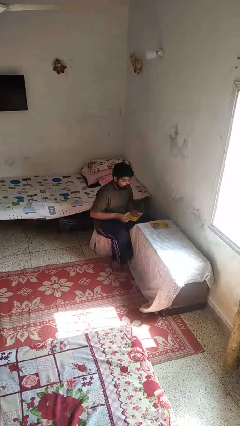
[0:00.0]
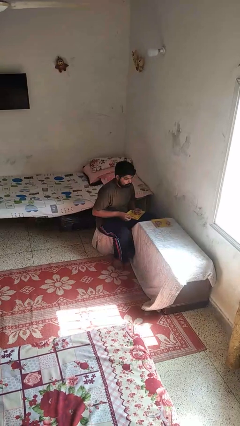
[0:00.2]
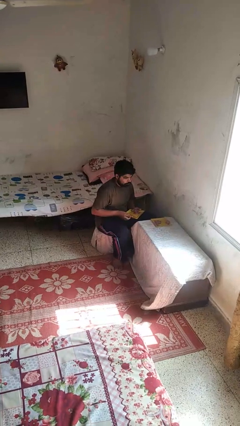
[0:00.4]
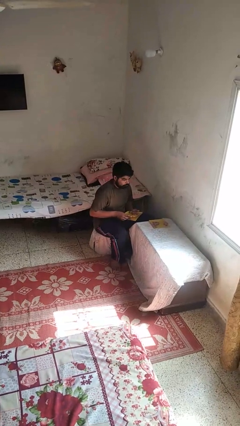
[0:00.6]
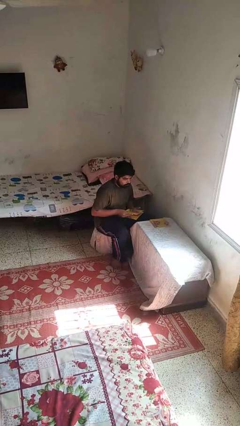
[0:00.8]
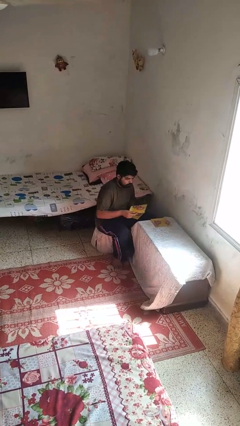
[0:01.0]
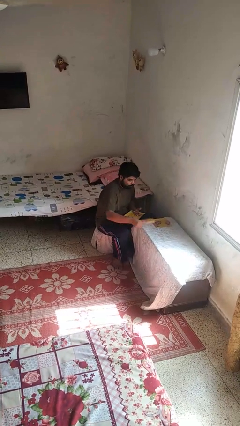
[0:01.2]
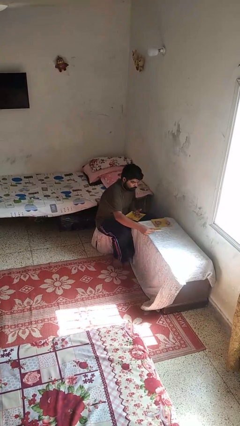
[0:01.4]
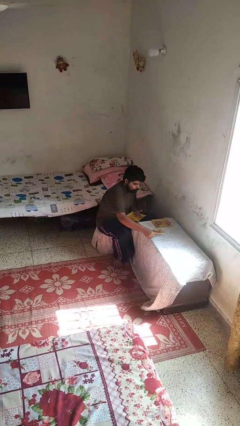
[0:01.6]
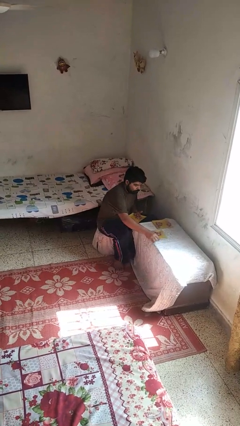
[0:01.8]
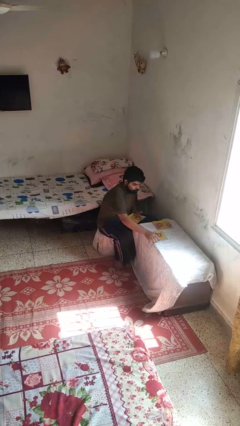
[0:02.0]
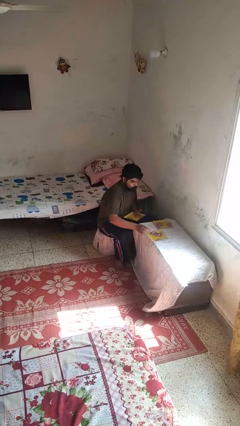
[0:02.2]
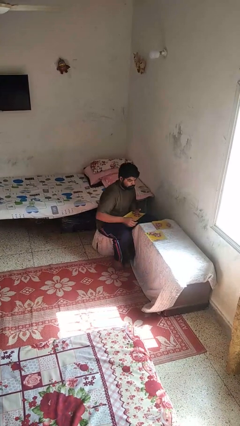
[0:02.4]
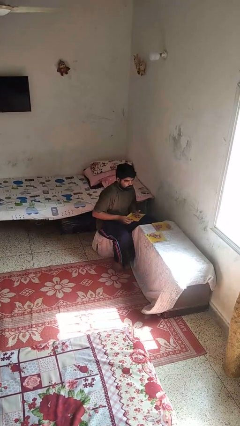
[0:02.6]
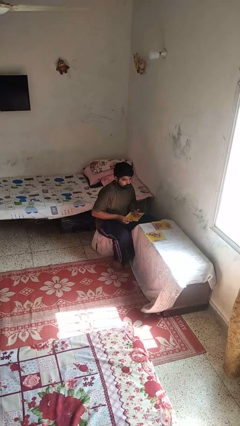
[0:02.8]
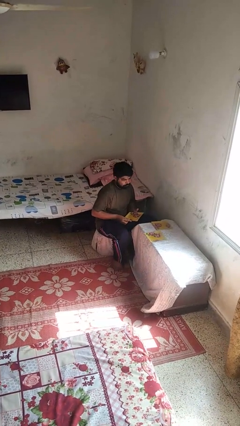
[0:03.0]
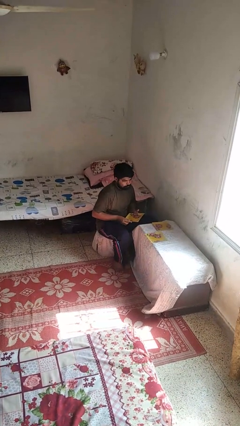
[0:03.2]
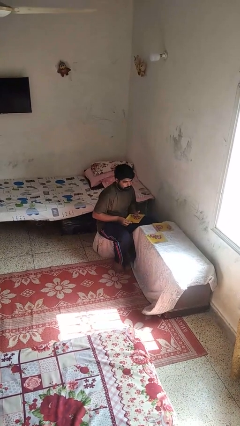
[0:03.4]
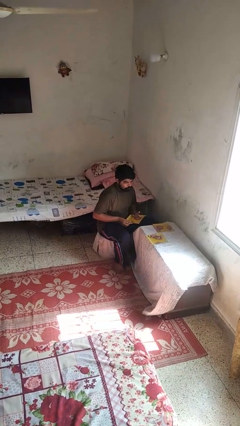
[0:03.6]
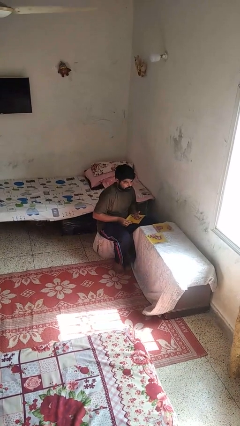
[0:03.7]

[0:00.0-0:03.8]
person sets table

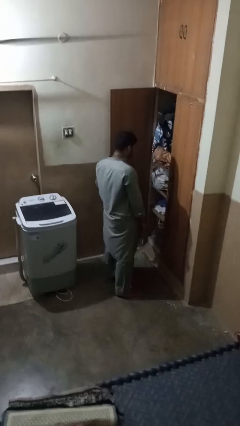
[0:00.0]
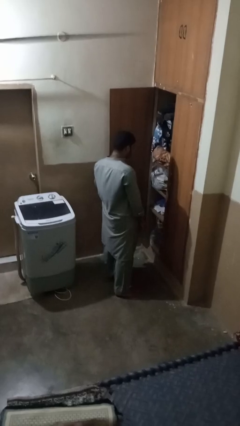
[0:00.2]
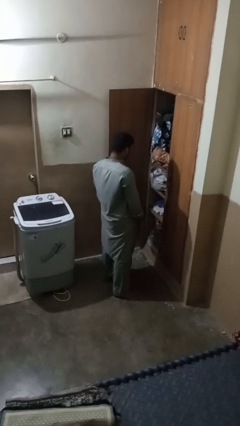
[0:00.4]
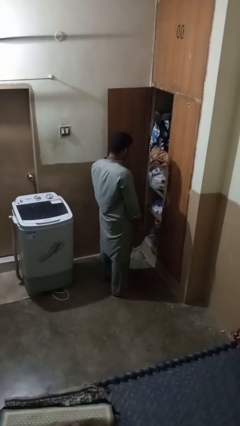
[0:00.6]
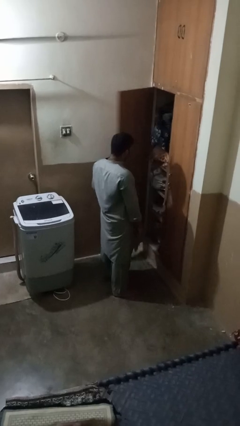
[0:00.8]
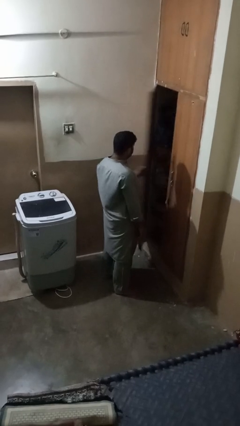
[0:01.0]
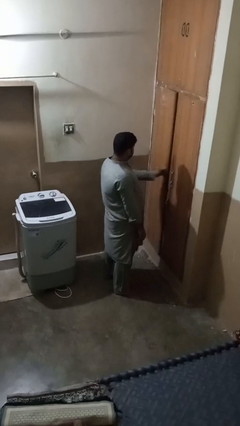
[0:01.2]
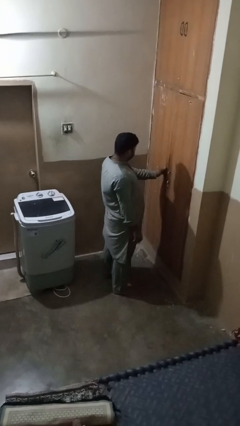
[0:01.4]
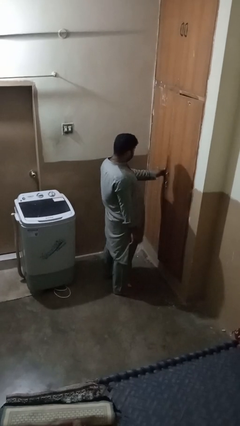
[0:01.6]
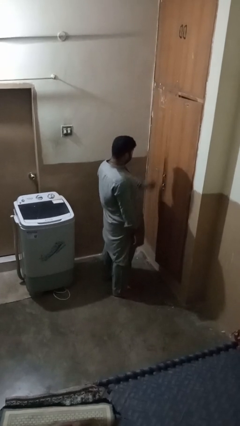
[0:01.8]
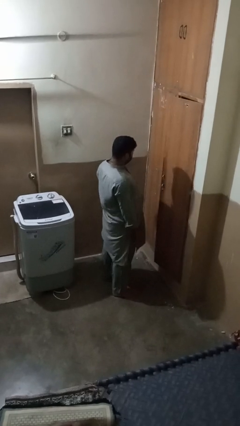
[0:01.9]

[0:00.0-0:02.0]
person closes closet door

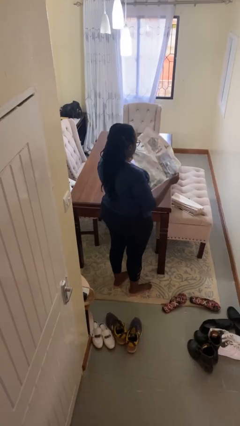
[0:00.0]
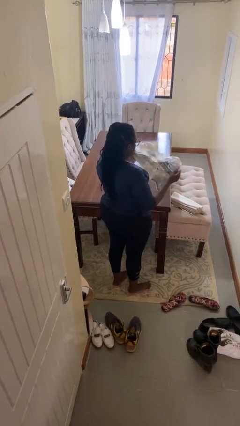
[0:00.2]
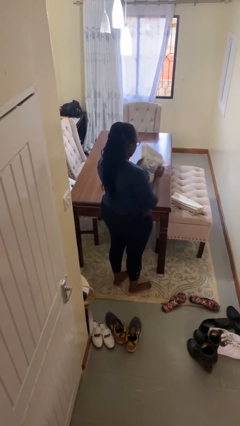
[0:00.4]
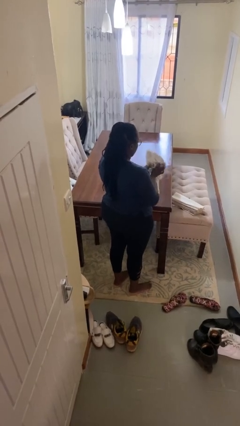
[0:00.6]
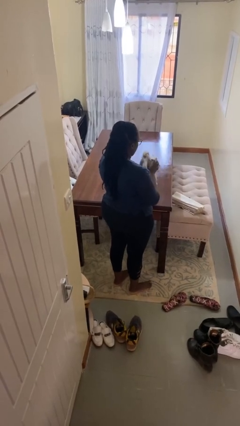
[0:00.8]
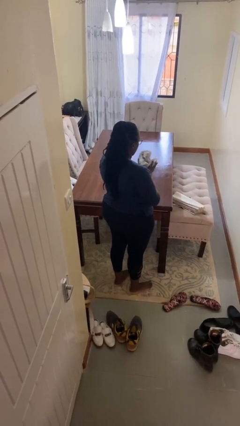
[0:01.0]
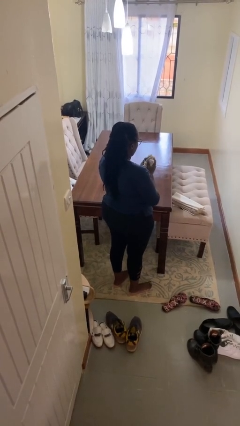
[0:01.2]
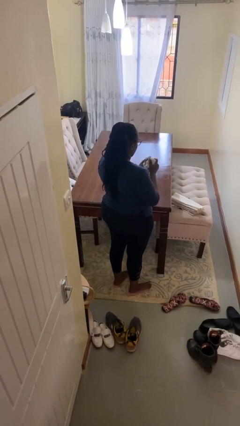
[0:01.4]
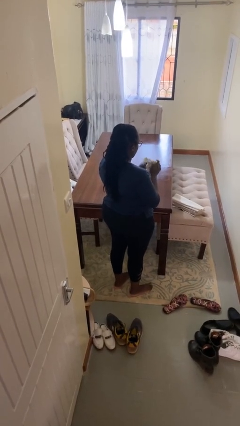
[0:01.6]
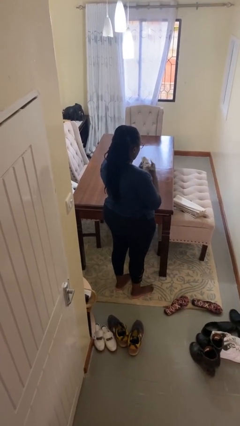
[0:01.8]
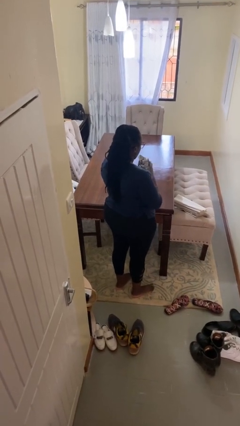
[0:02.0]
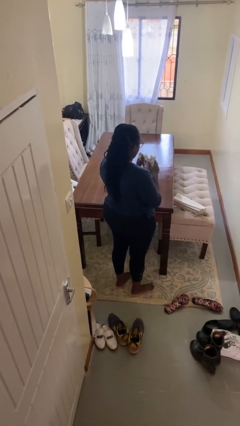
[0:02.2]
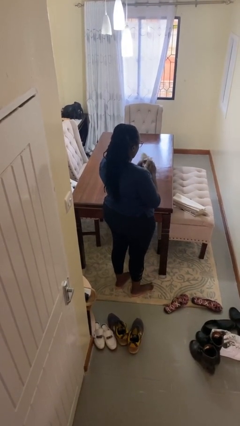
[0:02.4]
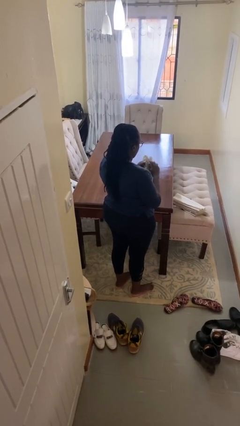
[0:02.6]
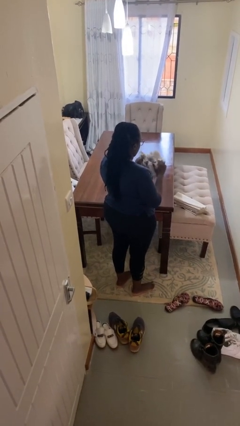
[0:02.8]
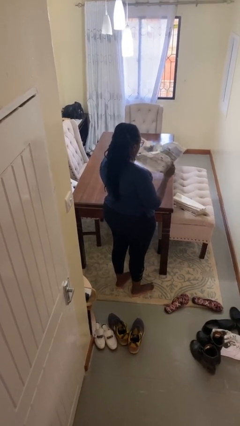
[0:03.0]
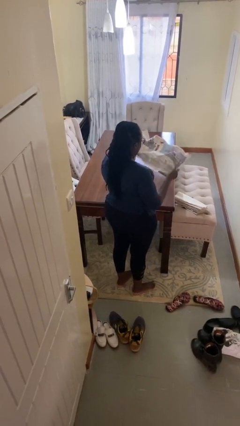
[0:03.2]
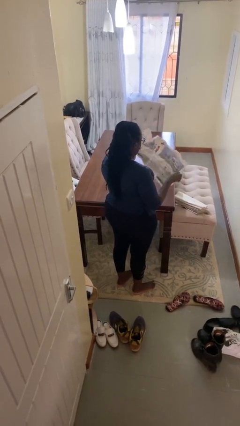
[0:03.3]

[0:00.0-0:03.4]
person crumples paper

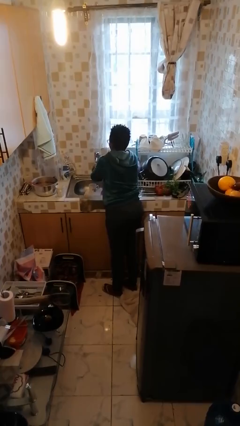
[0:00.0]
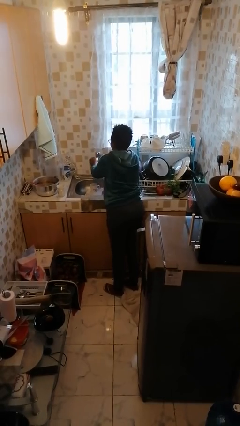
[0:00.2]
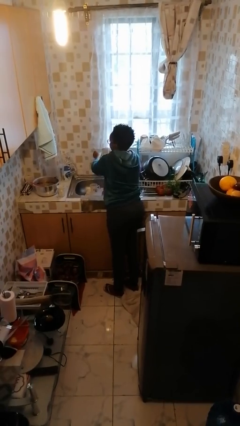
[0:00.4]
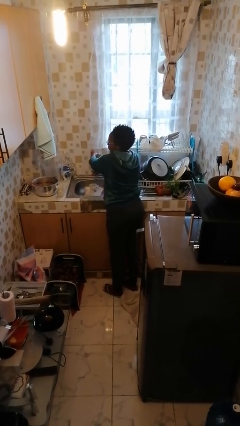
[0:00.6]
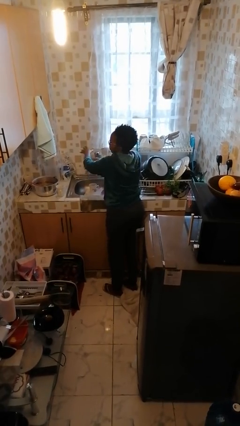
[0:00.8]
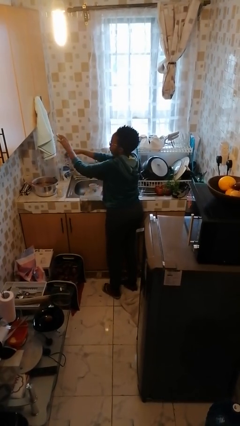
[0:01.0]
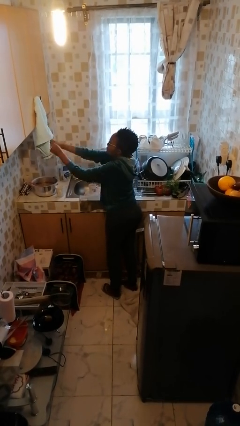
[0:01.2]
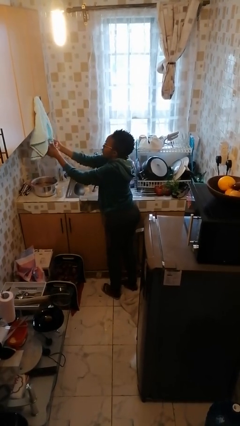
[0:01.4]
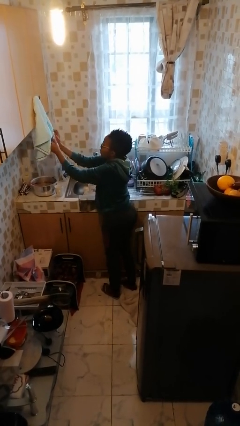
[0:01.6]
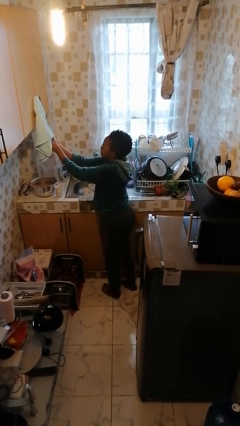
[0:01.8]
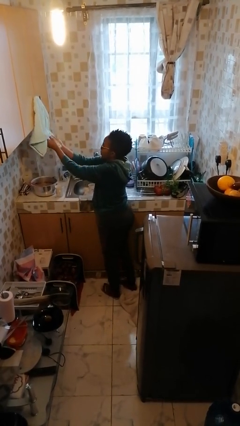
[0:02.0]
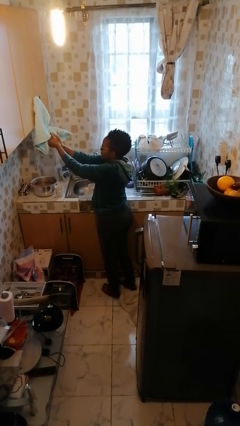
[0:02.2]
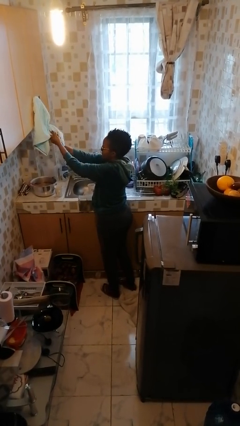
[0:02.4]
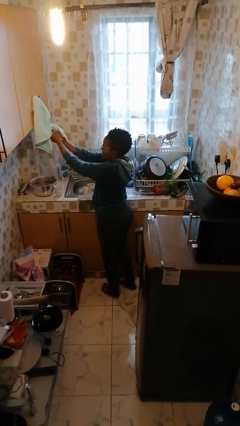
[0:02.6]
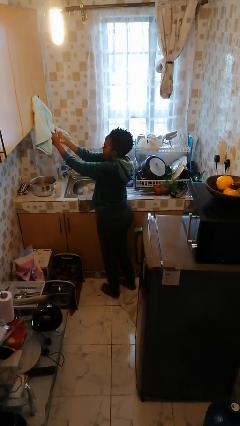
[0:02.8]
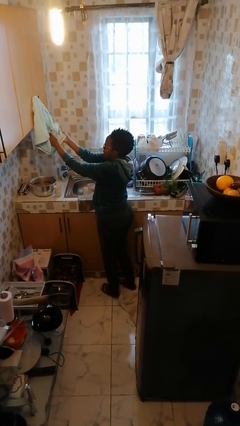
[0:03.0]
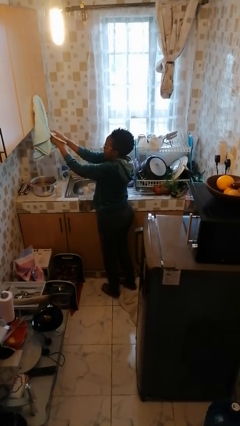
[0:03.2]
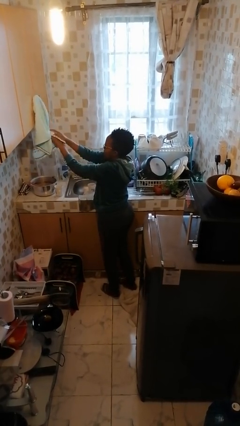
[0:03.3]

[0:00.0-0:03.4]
person dries hands with towel

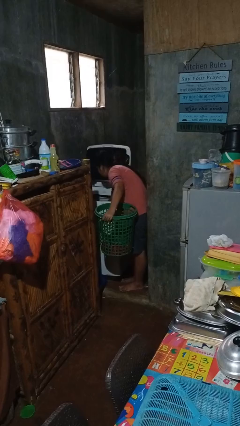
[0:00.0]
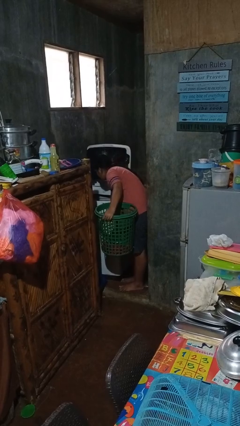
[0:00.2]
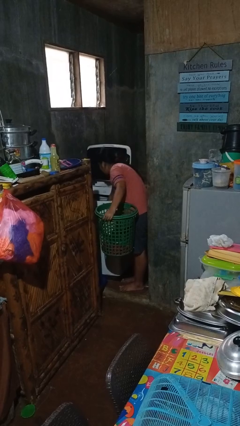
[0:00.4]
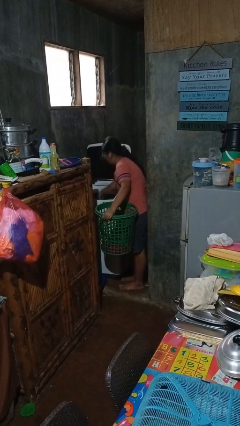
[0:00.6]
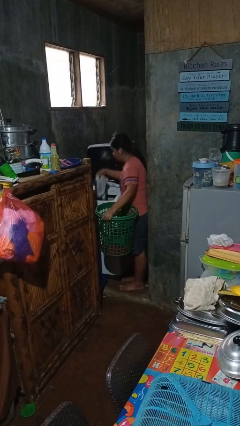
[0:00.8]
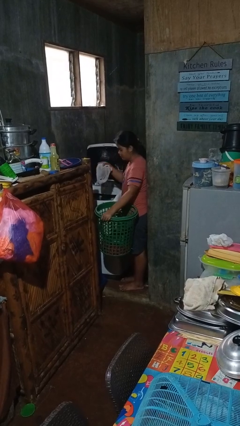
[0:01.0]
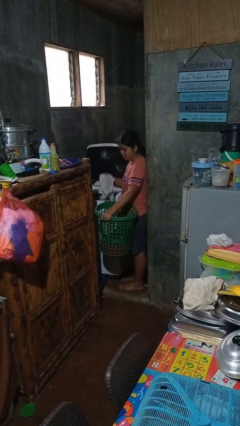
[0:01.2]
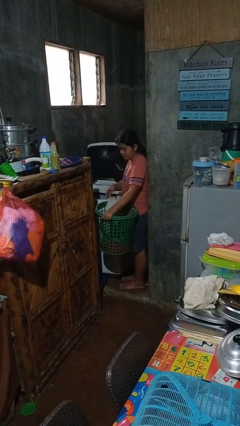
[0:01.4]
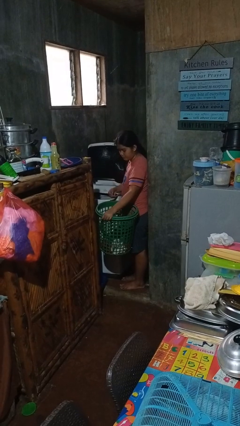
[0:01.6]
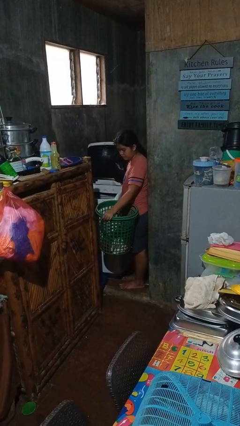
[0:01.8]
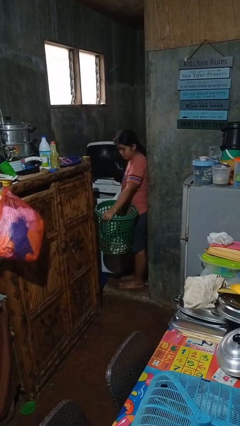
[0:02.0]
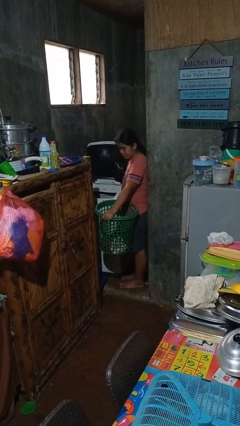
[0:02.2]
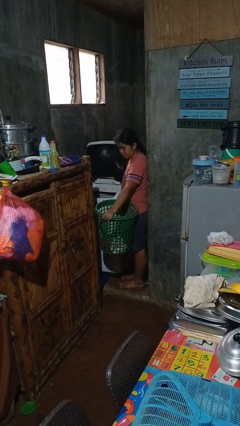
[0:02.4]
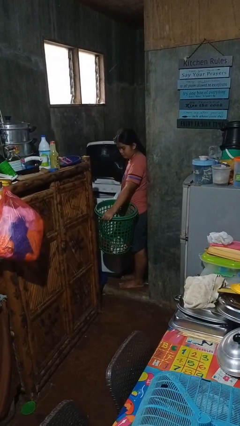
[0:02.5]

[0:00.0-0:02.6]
person unloads clotheswasher

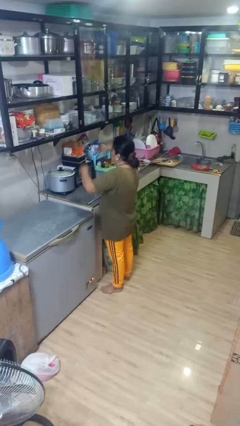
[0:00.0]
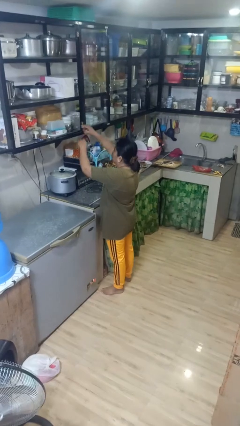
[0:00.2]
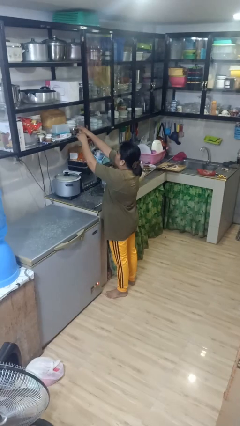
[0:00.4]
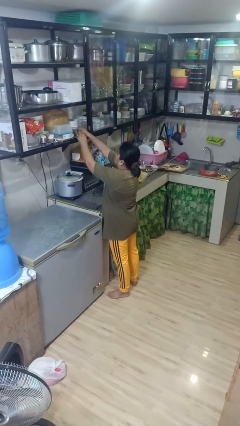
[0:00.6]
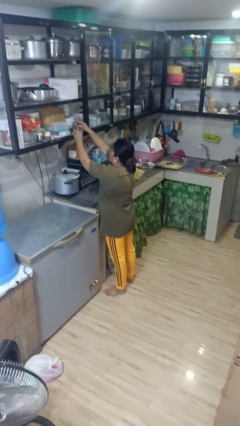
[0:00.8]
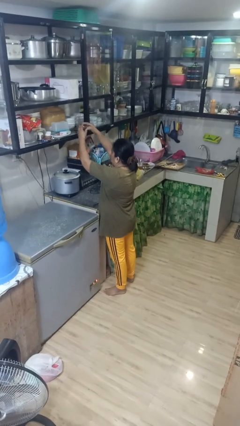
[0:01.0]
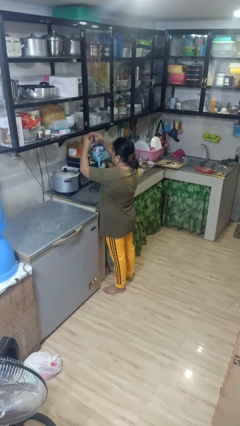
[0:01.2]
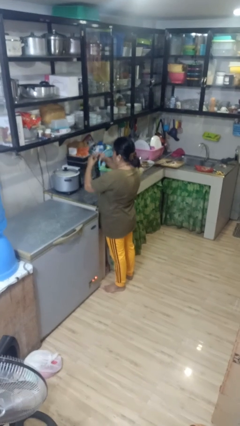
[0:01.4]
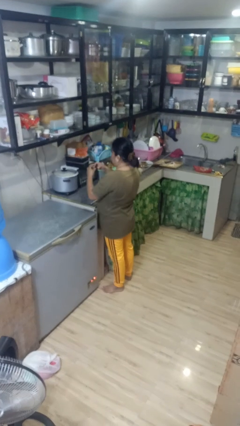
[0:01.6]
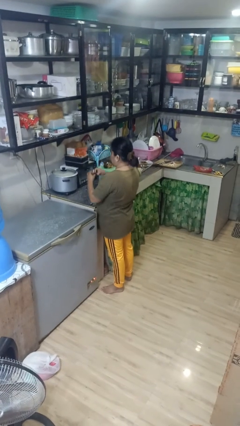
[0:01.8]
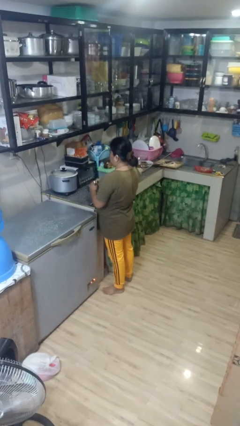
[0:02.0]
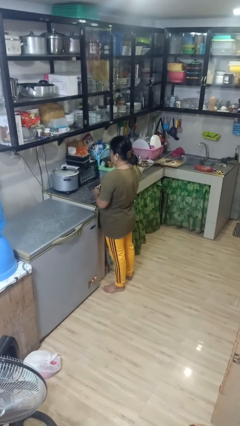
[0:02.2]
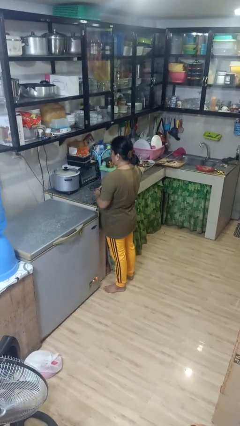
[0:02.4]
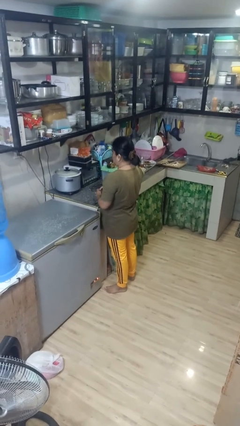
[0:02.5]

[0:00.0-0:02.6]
person takes object from cabinet
